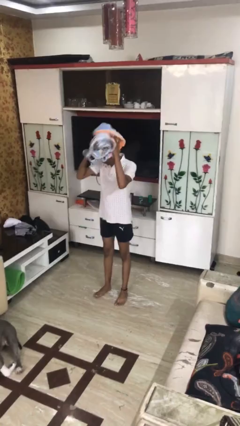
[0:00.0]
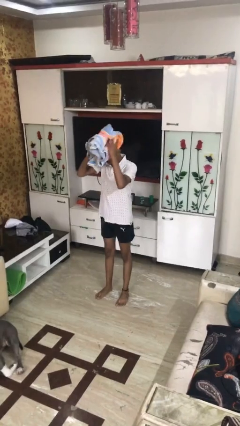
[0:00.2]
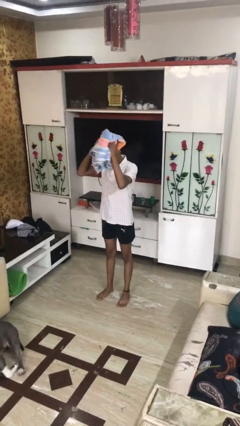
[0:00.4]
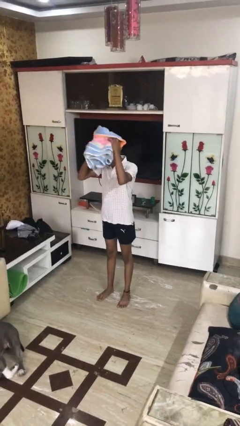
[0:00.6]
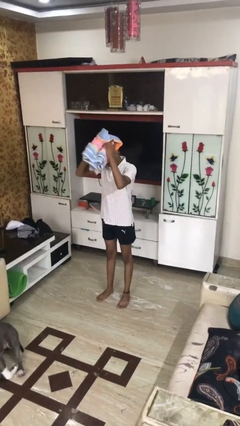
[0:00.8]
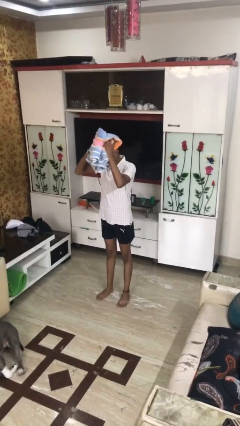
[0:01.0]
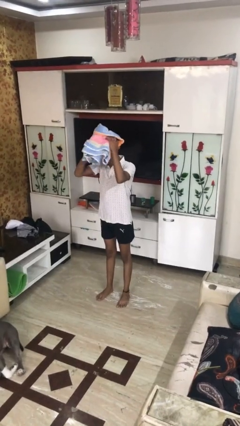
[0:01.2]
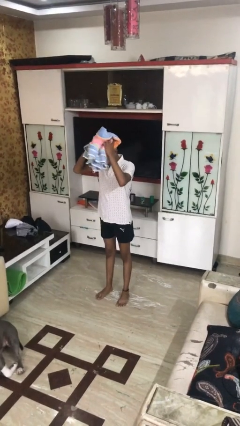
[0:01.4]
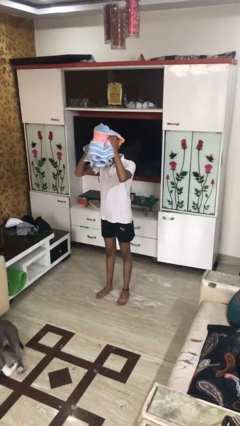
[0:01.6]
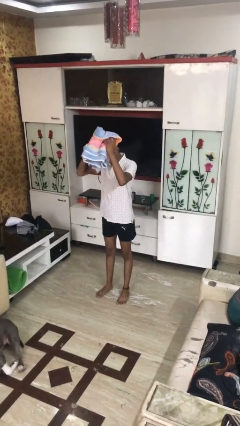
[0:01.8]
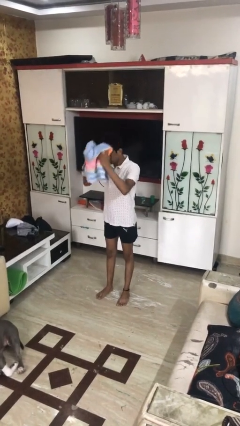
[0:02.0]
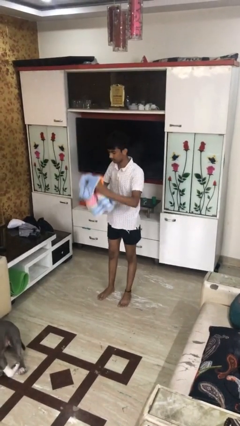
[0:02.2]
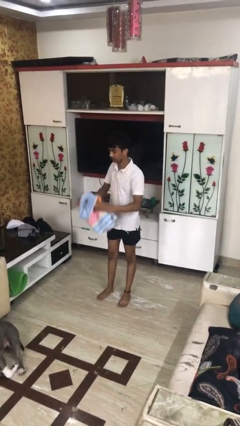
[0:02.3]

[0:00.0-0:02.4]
person dries hair with towel

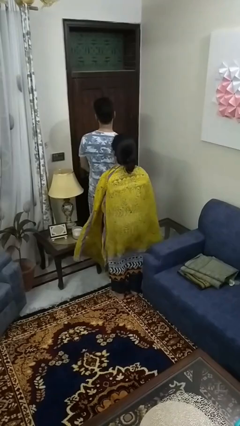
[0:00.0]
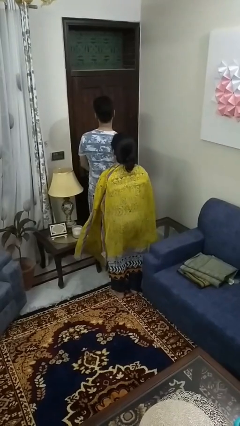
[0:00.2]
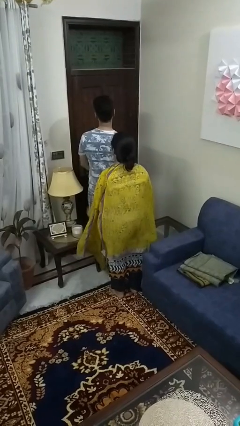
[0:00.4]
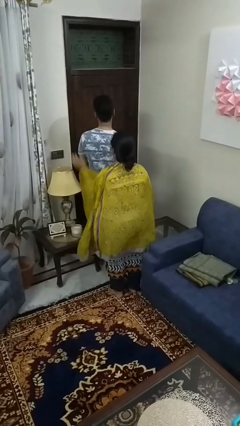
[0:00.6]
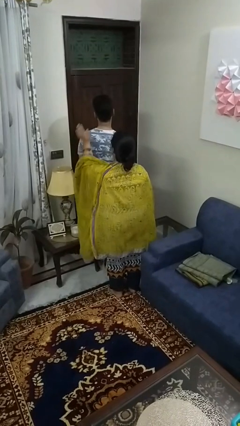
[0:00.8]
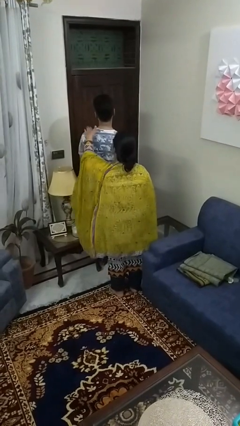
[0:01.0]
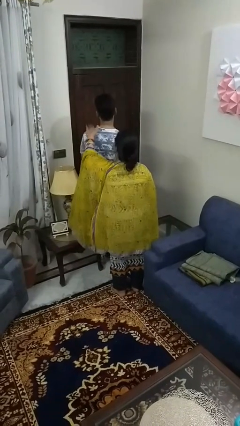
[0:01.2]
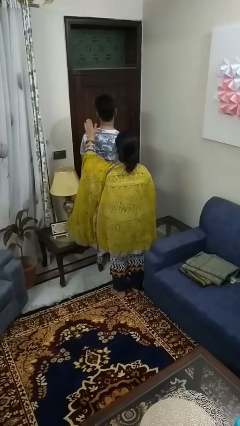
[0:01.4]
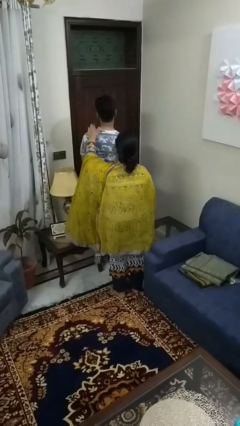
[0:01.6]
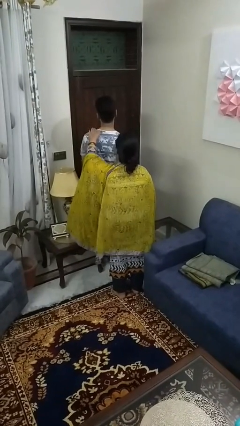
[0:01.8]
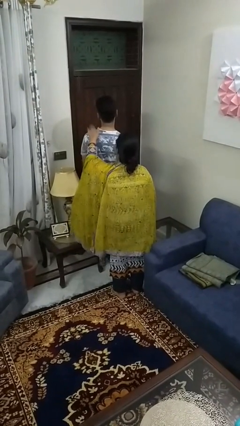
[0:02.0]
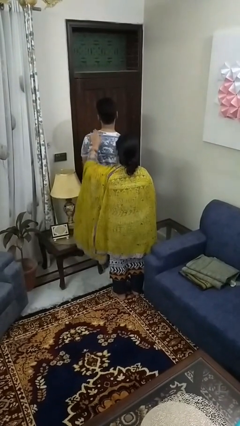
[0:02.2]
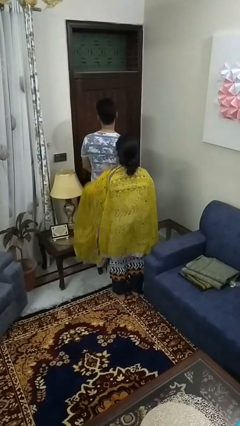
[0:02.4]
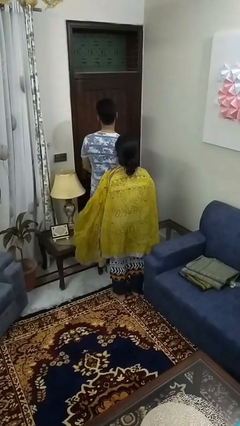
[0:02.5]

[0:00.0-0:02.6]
person pounds shoulders of person

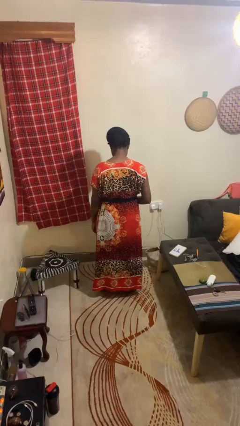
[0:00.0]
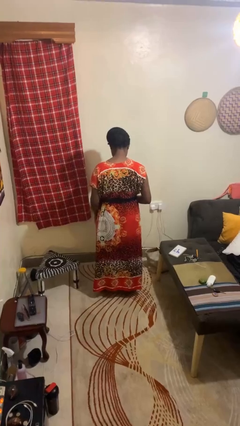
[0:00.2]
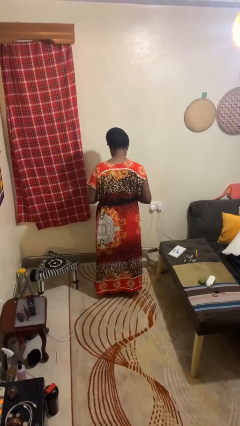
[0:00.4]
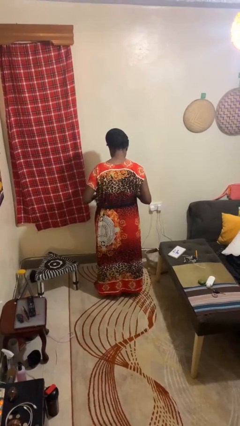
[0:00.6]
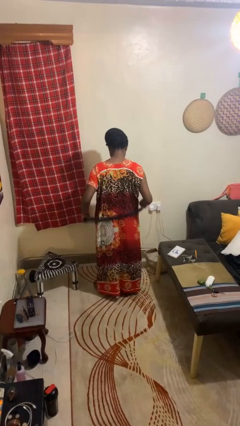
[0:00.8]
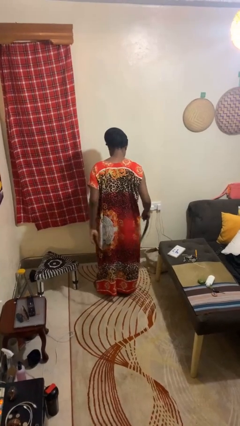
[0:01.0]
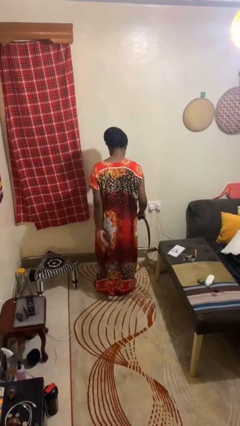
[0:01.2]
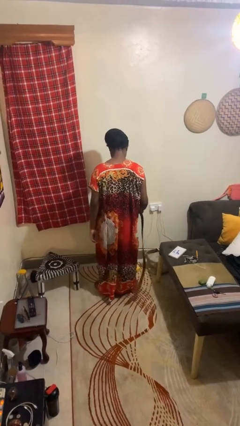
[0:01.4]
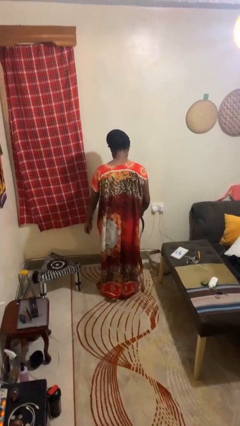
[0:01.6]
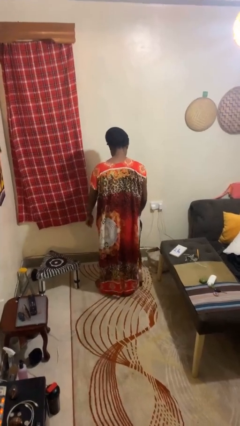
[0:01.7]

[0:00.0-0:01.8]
person takes off belt

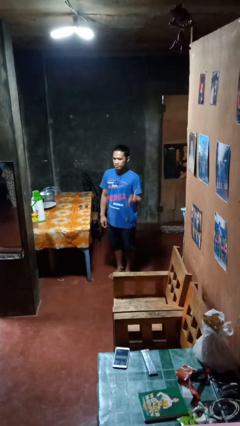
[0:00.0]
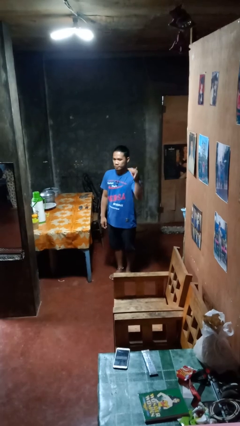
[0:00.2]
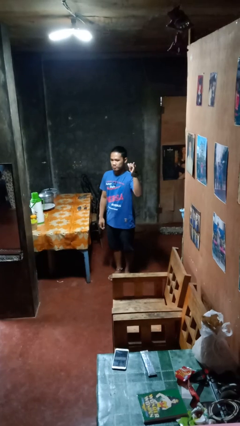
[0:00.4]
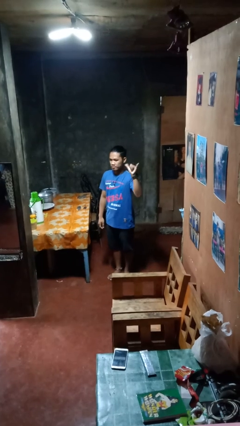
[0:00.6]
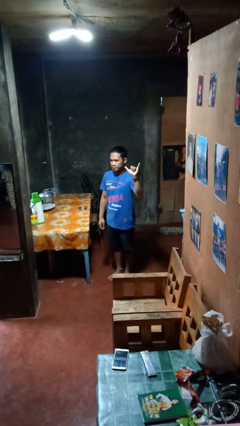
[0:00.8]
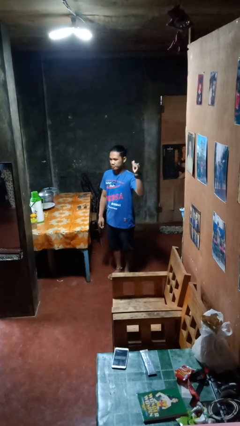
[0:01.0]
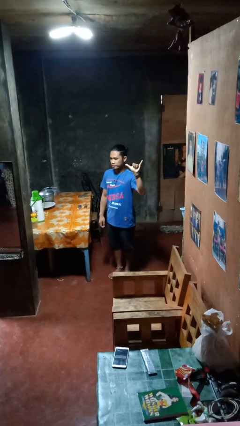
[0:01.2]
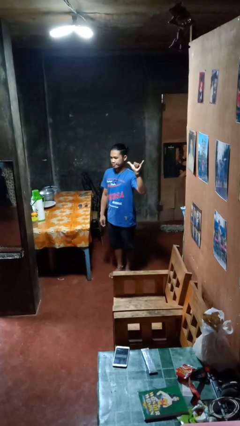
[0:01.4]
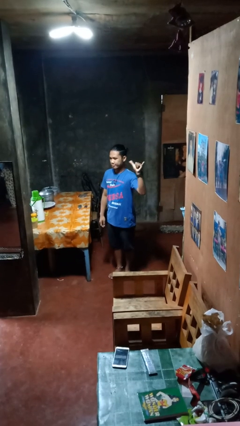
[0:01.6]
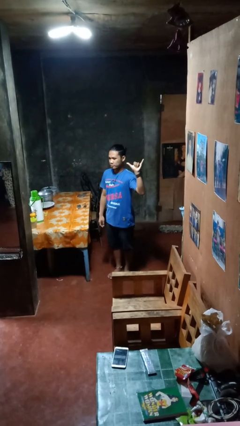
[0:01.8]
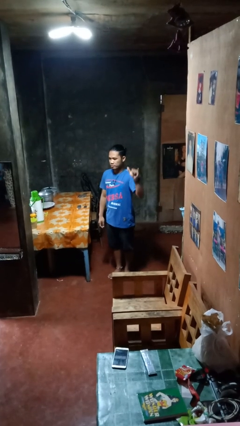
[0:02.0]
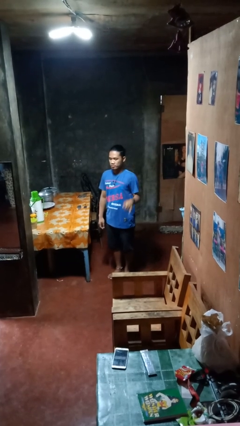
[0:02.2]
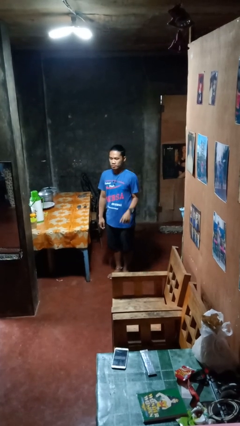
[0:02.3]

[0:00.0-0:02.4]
person gestures hang loose

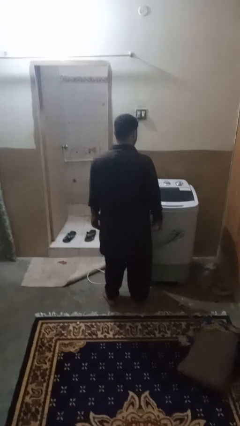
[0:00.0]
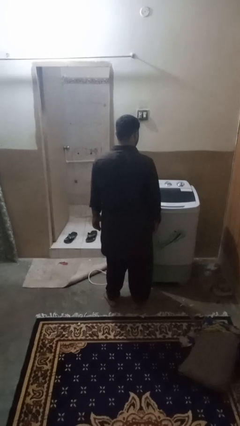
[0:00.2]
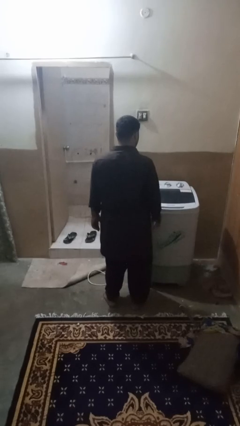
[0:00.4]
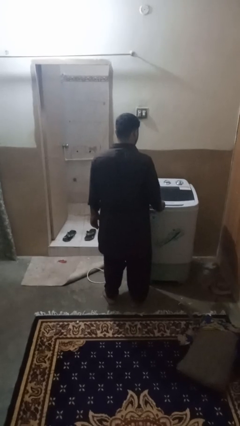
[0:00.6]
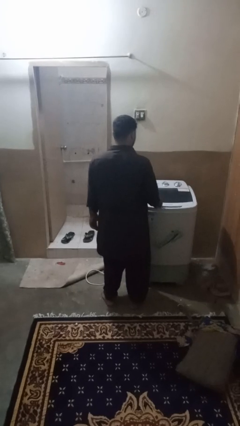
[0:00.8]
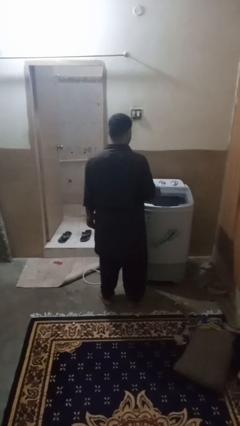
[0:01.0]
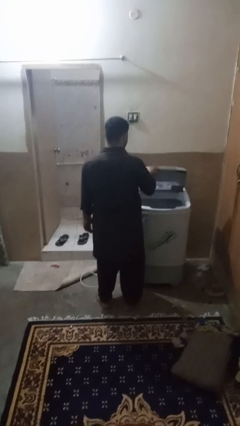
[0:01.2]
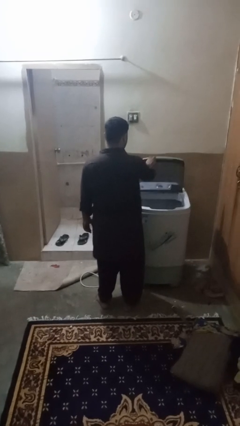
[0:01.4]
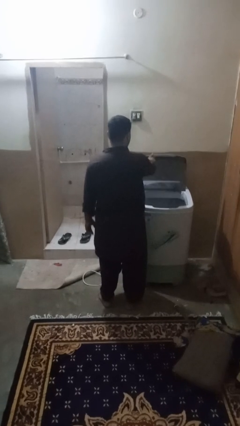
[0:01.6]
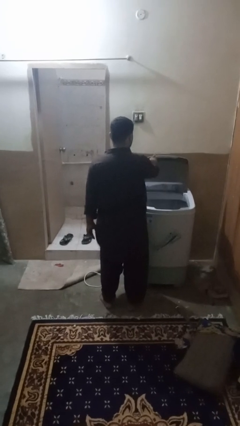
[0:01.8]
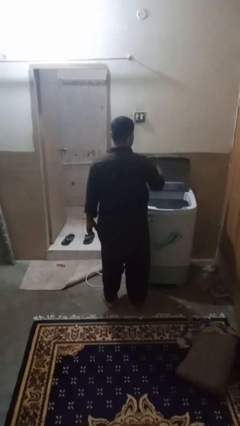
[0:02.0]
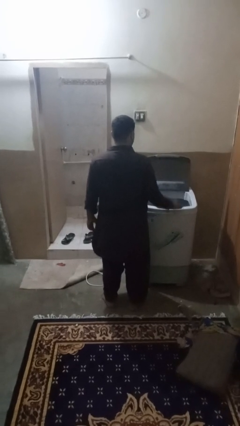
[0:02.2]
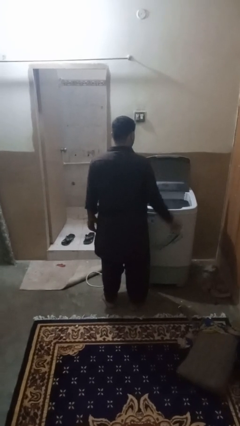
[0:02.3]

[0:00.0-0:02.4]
person opens clothes washer

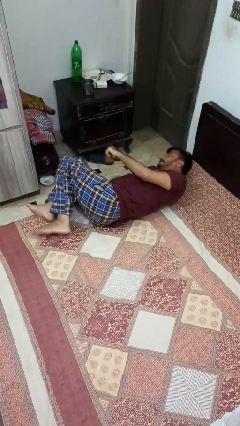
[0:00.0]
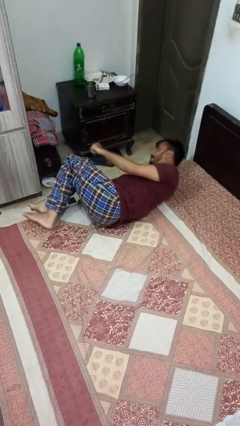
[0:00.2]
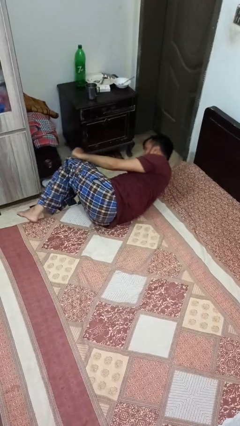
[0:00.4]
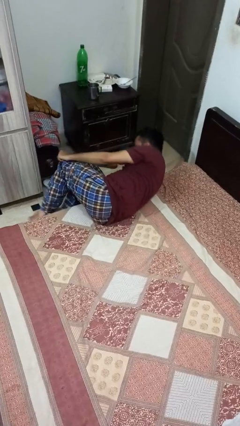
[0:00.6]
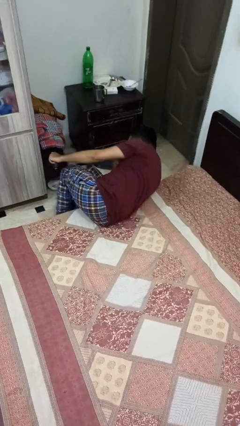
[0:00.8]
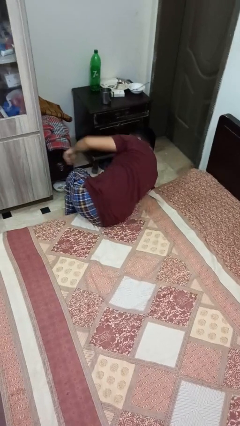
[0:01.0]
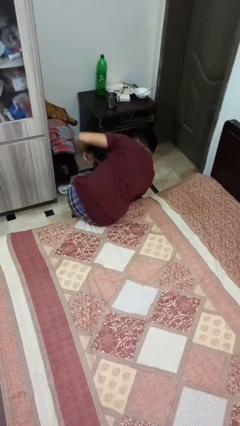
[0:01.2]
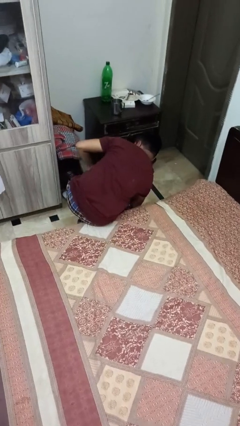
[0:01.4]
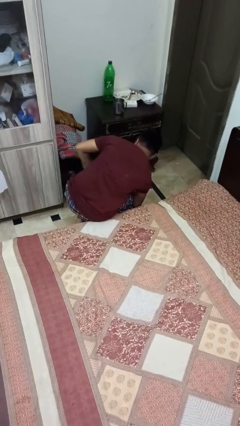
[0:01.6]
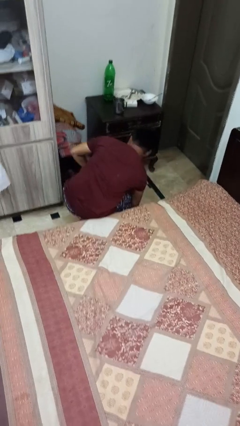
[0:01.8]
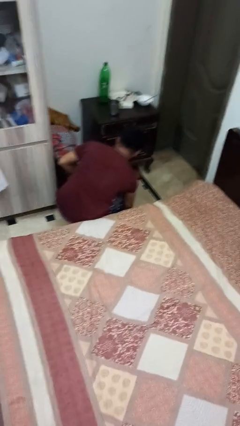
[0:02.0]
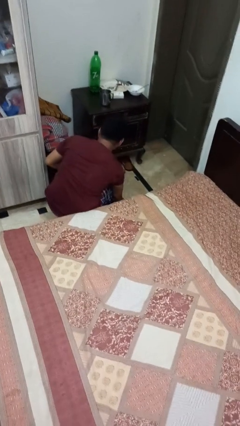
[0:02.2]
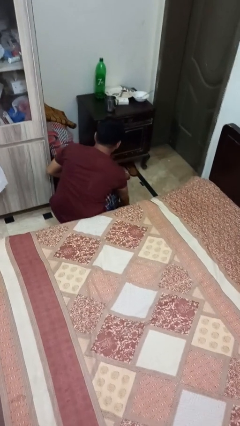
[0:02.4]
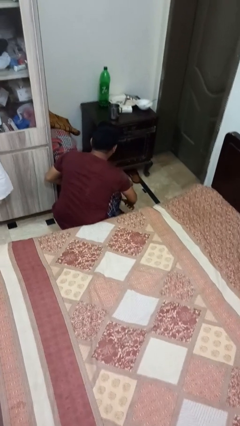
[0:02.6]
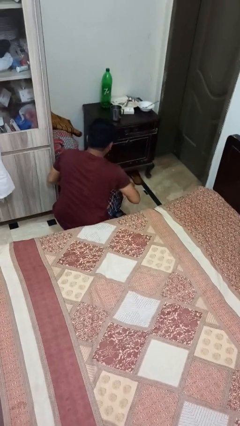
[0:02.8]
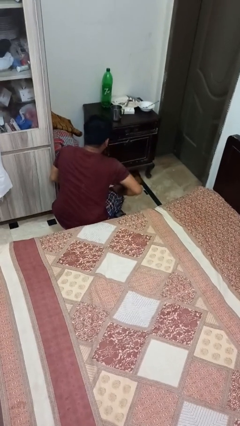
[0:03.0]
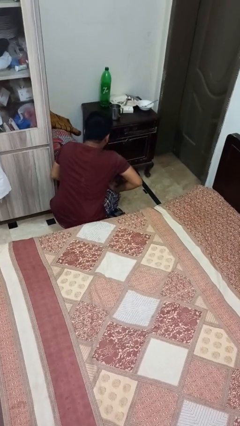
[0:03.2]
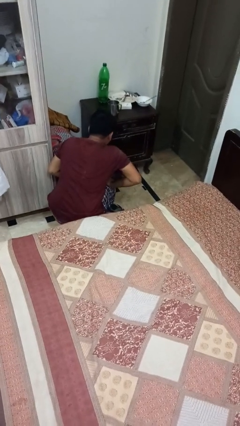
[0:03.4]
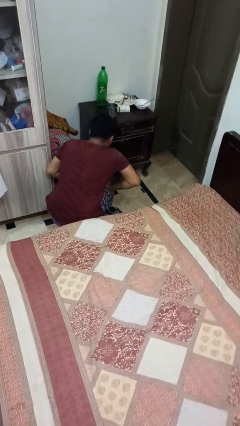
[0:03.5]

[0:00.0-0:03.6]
person falls from bed

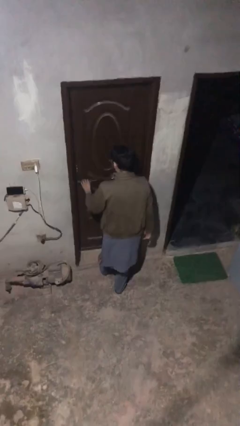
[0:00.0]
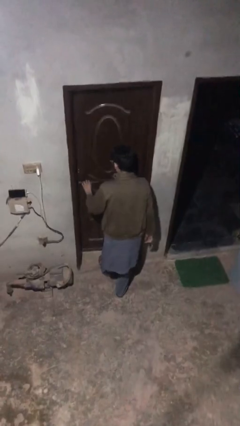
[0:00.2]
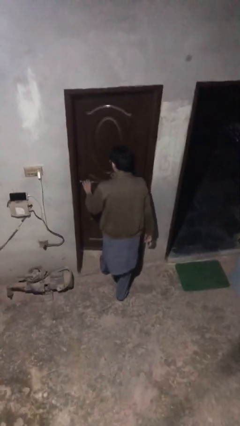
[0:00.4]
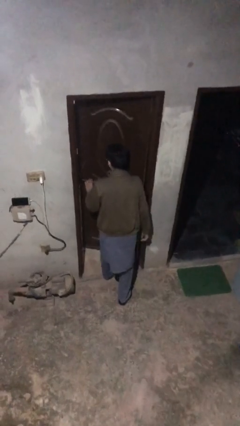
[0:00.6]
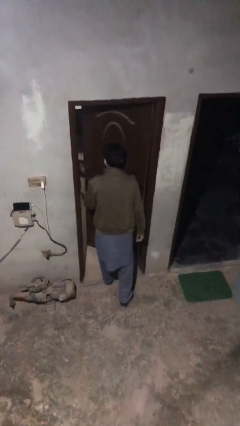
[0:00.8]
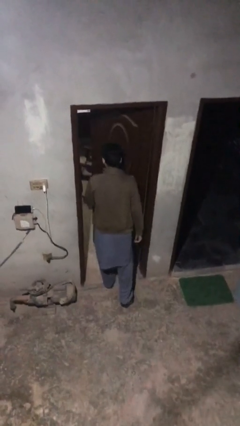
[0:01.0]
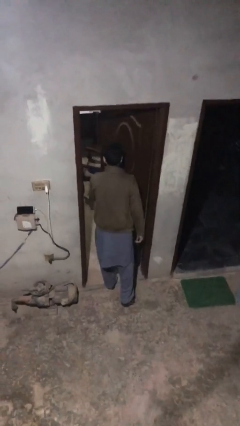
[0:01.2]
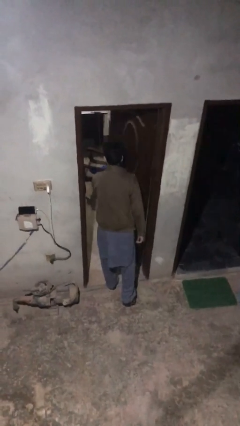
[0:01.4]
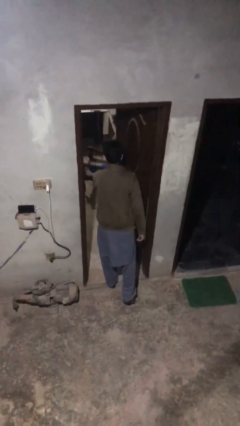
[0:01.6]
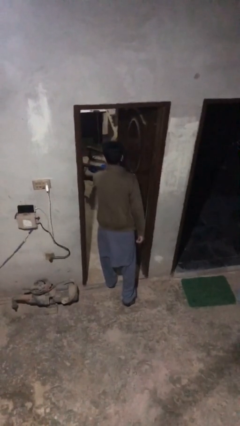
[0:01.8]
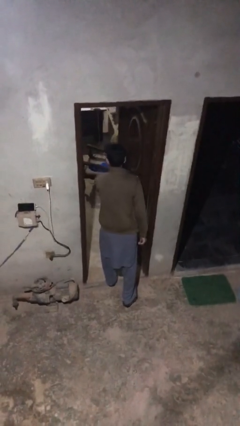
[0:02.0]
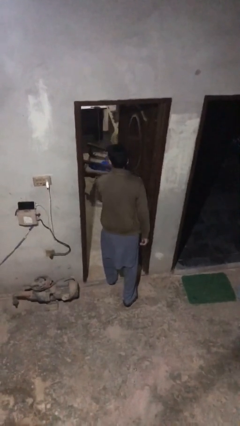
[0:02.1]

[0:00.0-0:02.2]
person opens facility door
